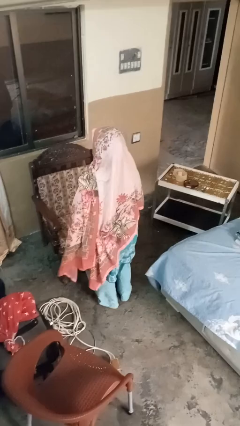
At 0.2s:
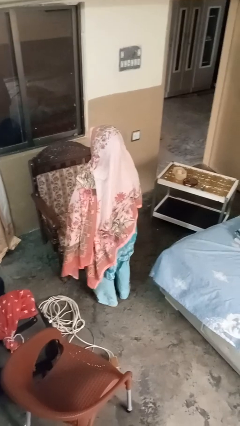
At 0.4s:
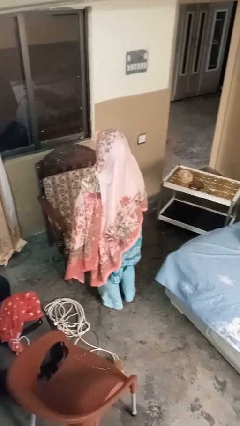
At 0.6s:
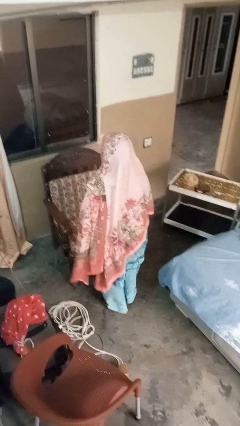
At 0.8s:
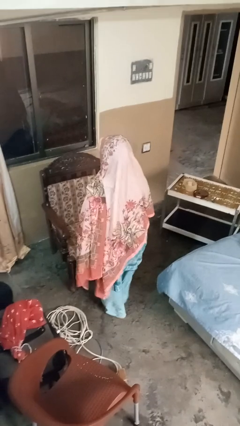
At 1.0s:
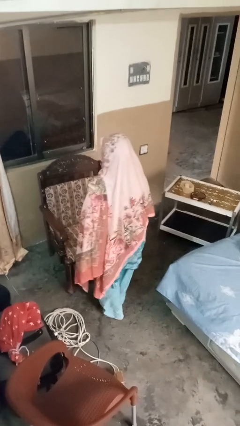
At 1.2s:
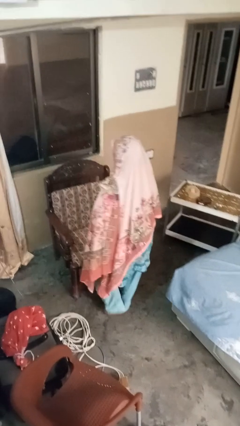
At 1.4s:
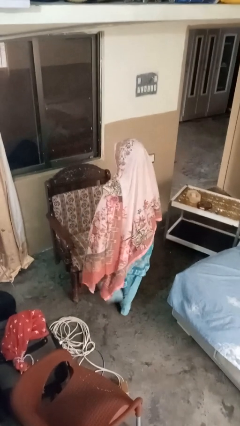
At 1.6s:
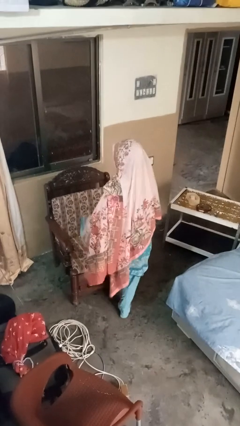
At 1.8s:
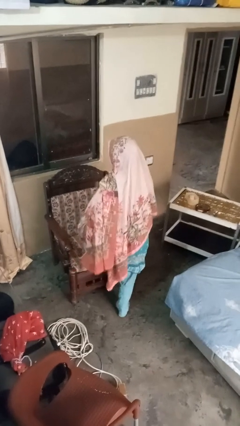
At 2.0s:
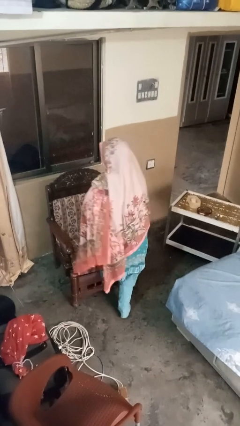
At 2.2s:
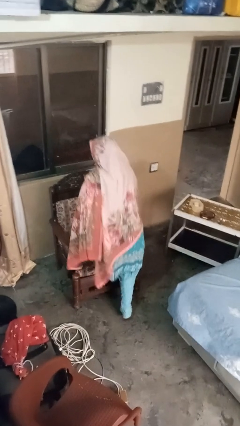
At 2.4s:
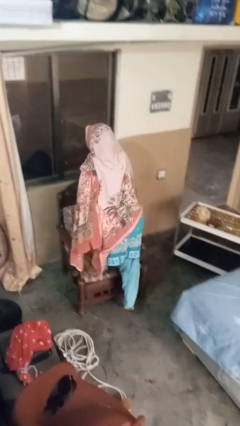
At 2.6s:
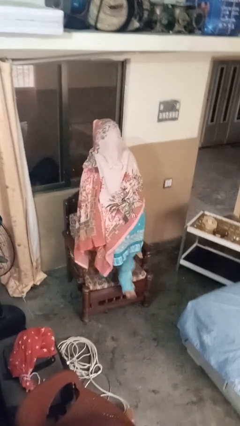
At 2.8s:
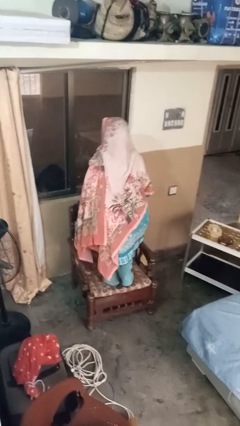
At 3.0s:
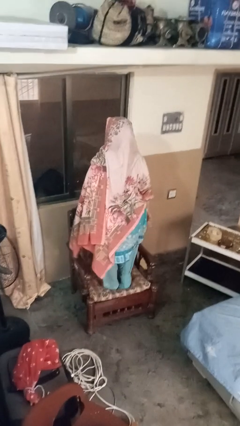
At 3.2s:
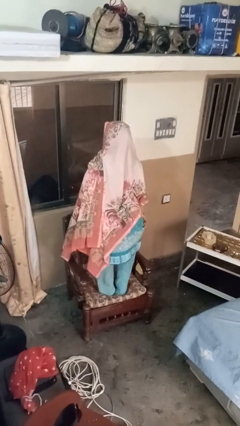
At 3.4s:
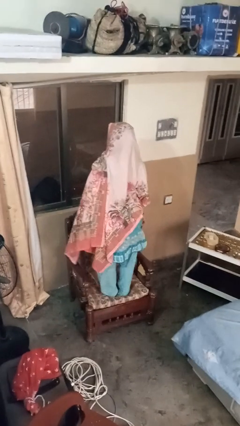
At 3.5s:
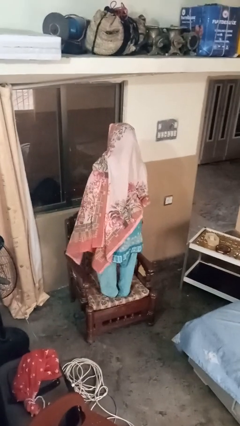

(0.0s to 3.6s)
person climbs on couch

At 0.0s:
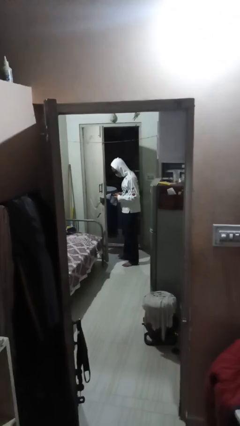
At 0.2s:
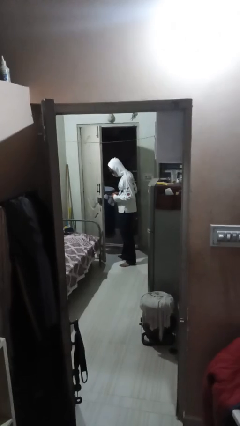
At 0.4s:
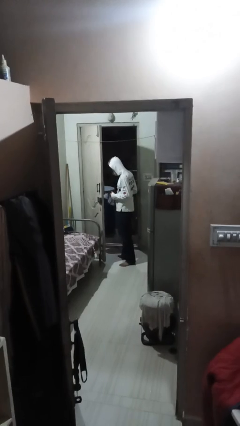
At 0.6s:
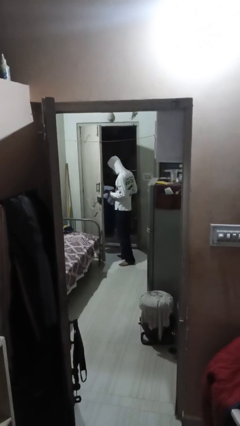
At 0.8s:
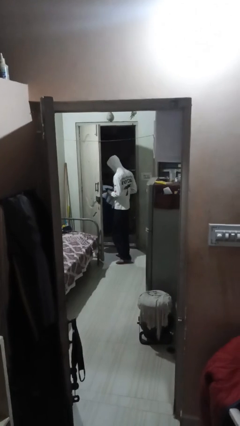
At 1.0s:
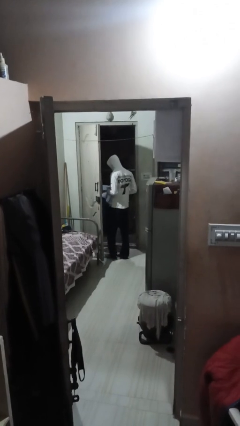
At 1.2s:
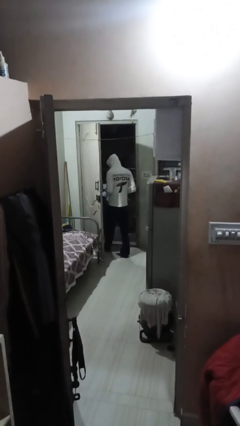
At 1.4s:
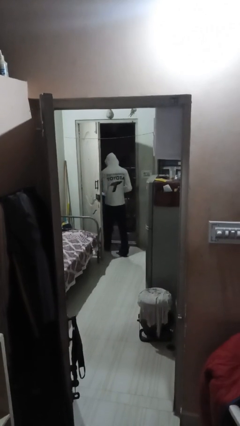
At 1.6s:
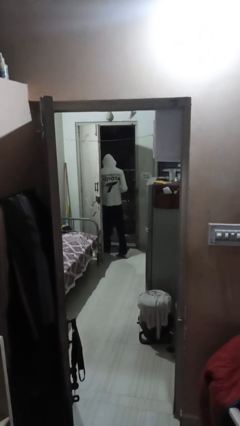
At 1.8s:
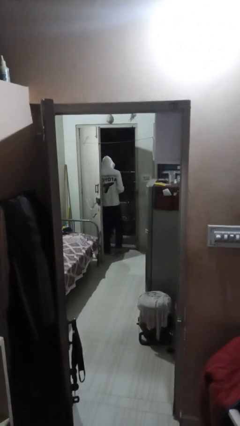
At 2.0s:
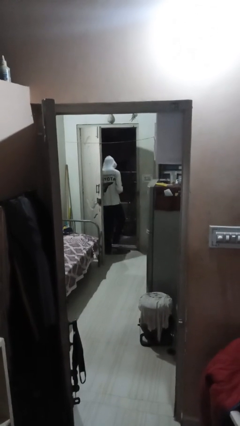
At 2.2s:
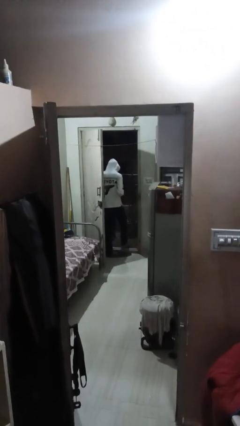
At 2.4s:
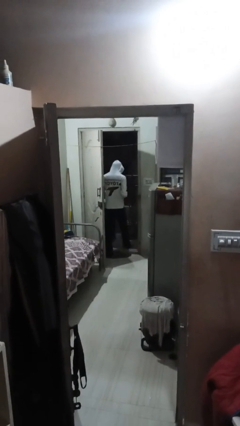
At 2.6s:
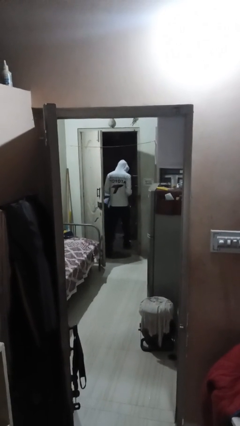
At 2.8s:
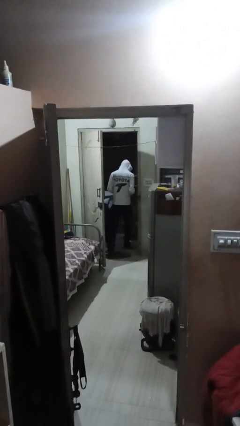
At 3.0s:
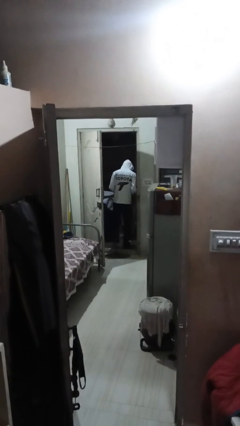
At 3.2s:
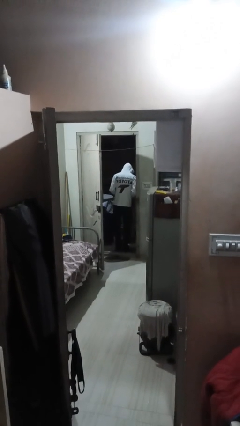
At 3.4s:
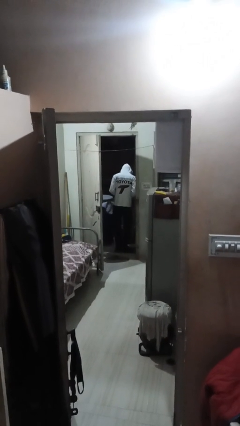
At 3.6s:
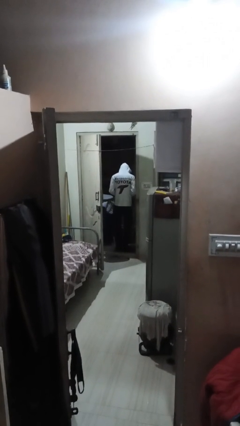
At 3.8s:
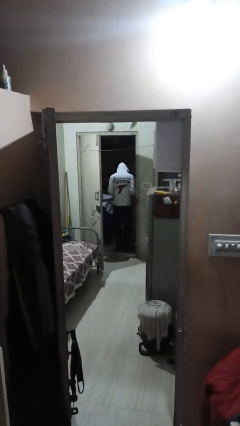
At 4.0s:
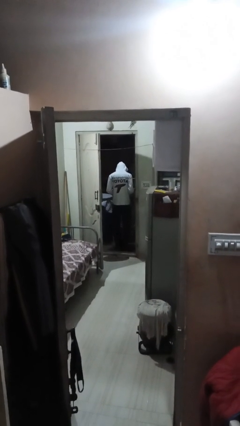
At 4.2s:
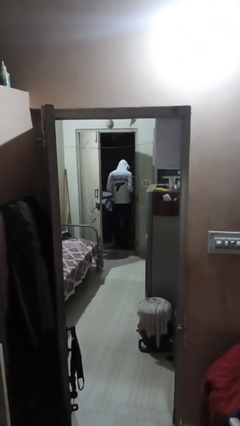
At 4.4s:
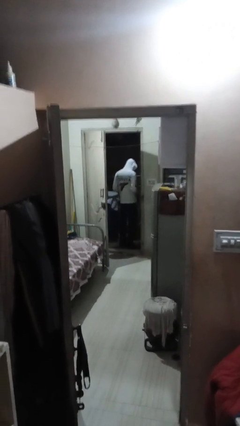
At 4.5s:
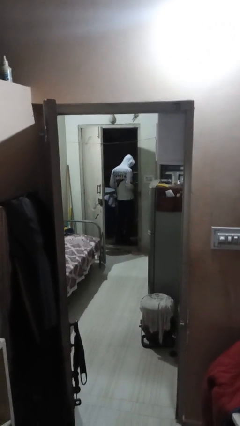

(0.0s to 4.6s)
person exits scene through structure

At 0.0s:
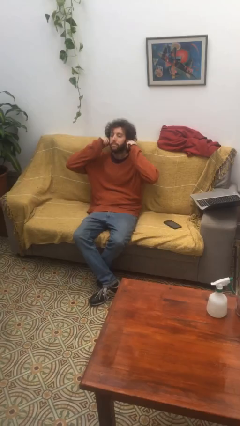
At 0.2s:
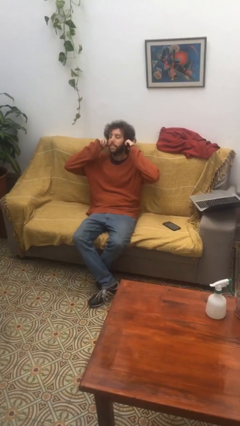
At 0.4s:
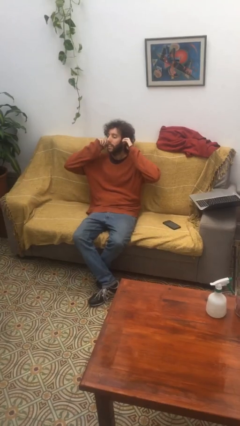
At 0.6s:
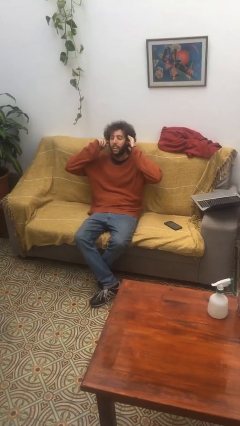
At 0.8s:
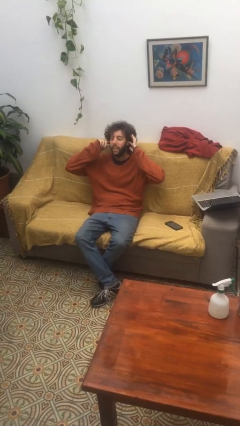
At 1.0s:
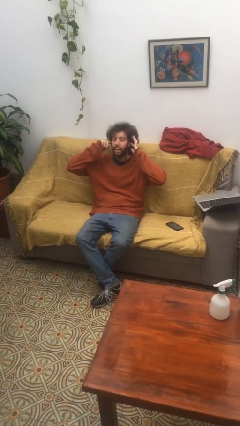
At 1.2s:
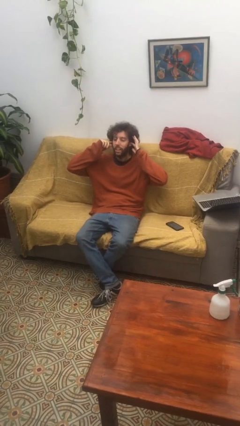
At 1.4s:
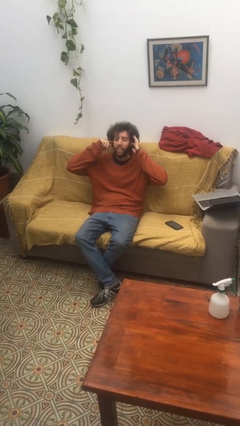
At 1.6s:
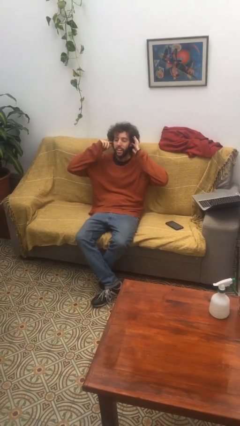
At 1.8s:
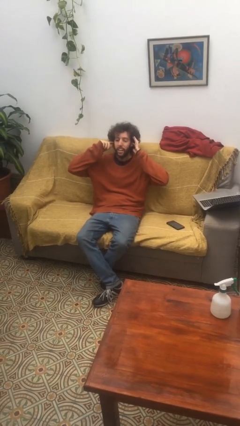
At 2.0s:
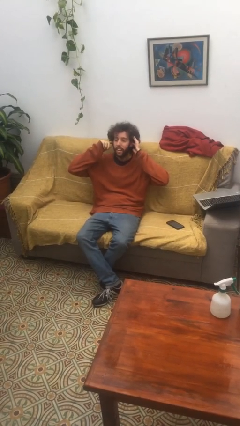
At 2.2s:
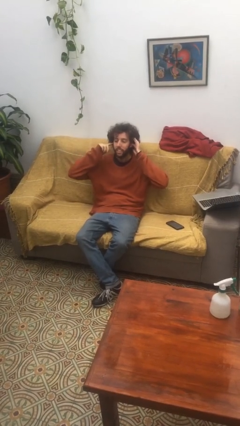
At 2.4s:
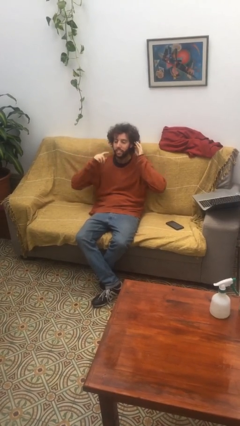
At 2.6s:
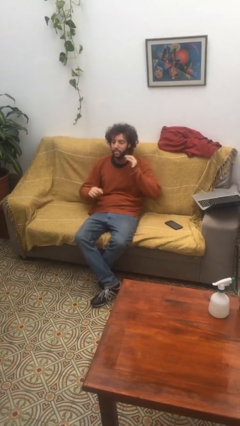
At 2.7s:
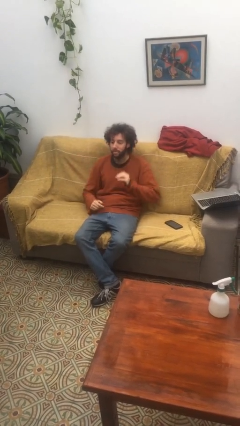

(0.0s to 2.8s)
person puts fingers in ear

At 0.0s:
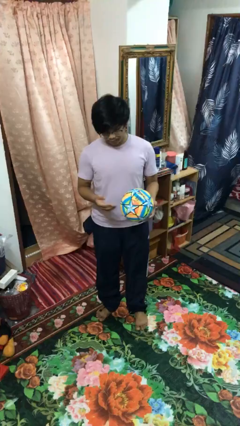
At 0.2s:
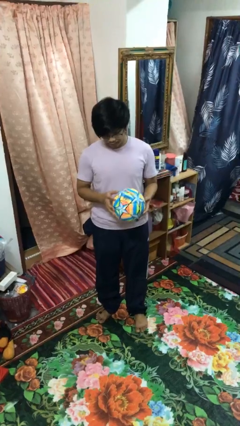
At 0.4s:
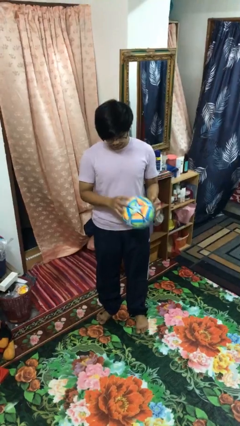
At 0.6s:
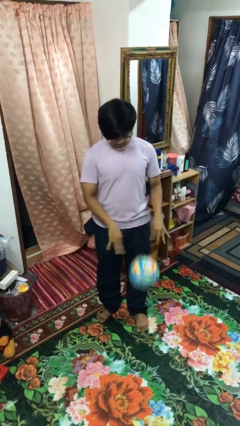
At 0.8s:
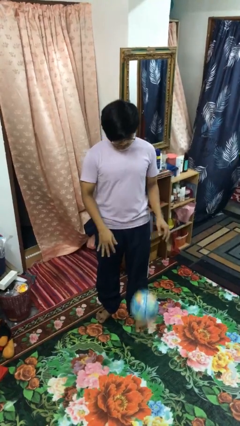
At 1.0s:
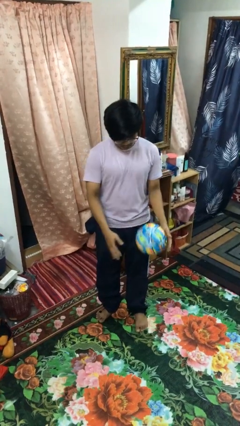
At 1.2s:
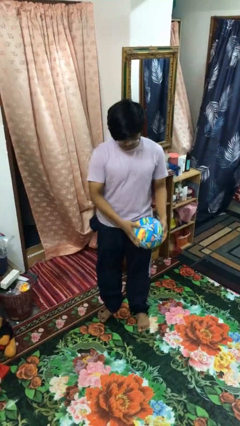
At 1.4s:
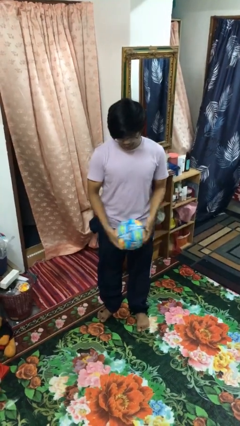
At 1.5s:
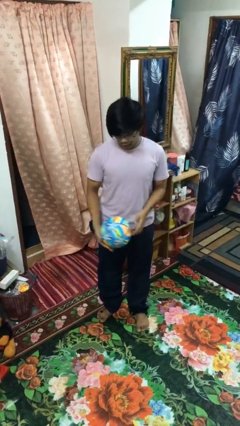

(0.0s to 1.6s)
person bounces ball on floor

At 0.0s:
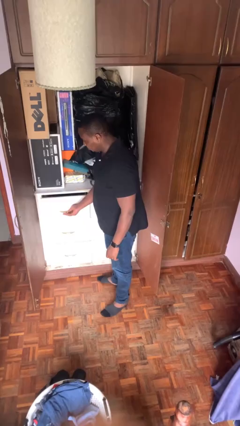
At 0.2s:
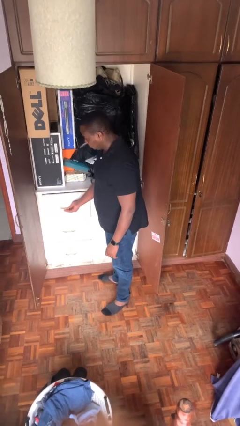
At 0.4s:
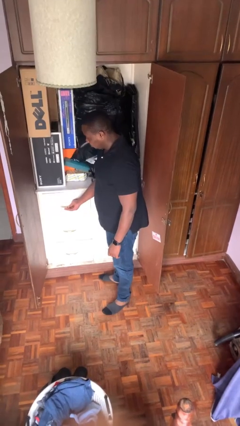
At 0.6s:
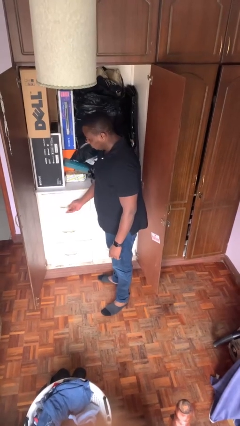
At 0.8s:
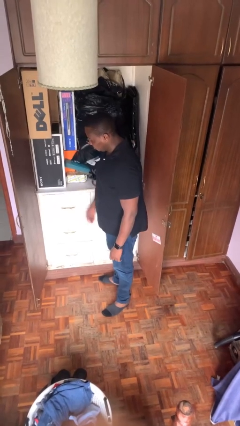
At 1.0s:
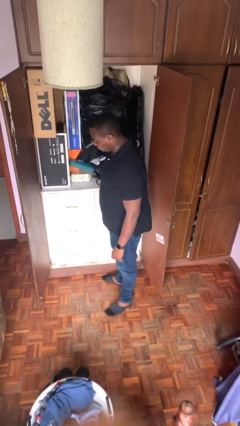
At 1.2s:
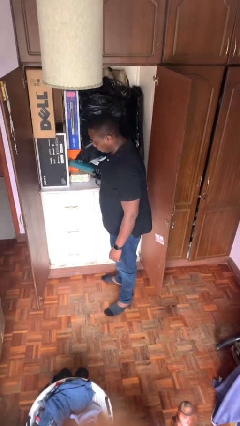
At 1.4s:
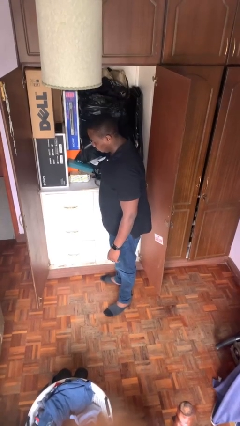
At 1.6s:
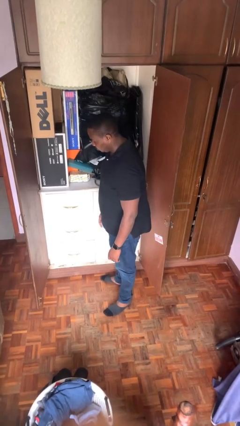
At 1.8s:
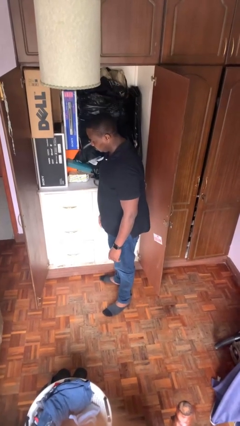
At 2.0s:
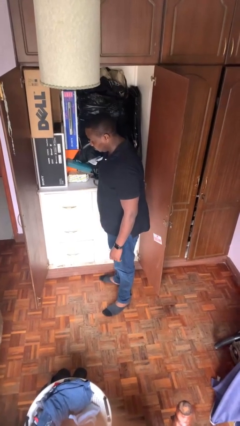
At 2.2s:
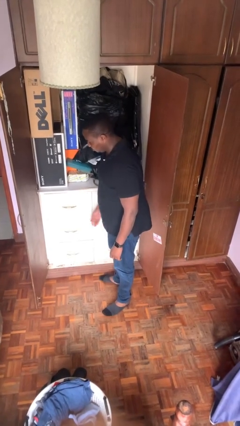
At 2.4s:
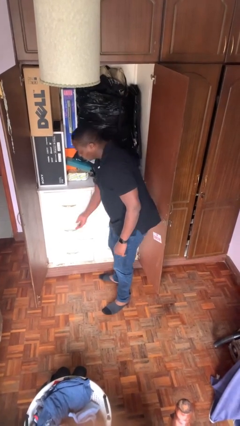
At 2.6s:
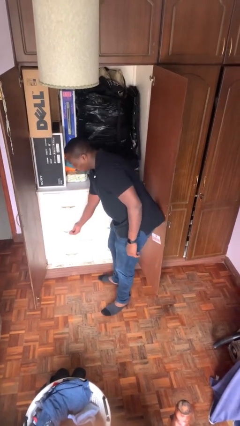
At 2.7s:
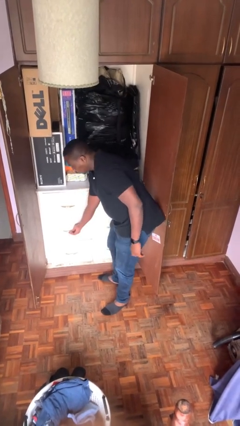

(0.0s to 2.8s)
person closes dresser drawer

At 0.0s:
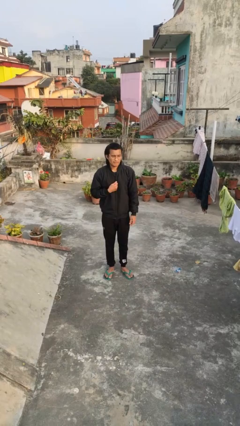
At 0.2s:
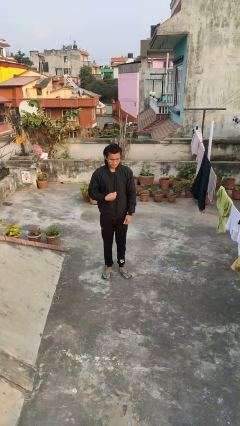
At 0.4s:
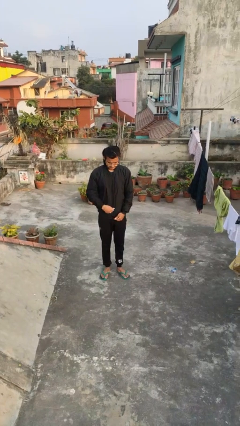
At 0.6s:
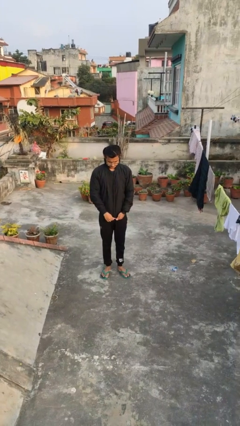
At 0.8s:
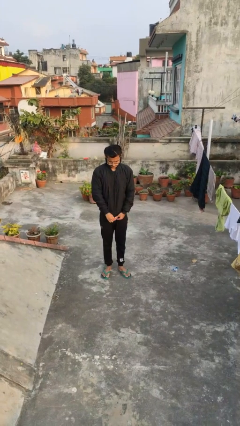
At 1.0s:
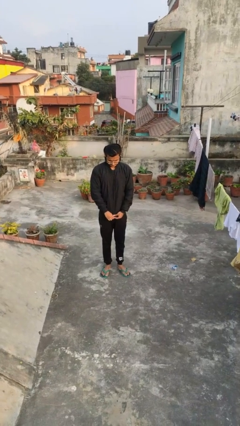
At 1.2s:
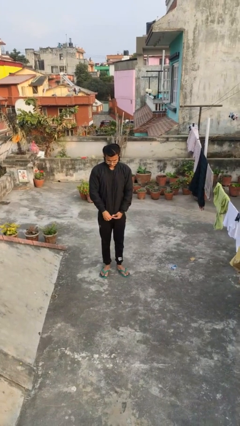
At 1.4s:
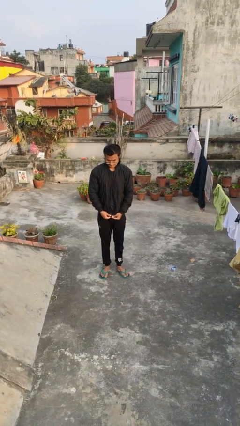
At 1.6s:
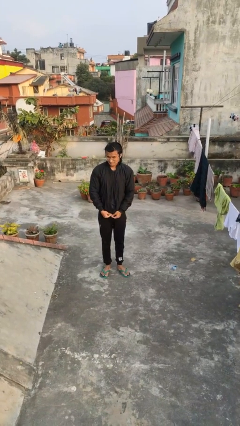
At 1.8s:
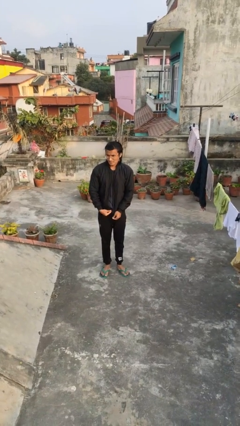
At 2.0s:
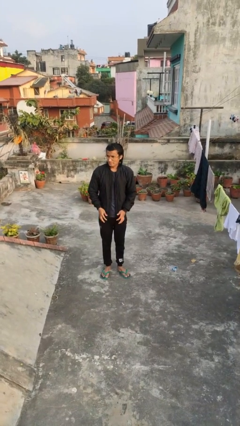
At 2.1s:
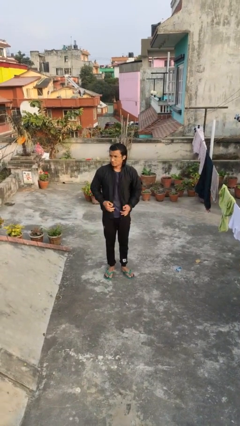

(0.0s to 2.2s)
person unzips jacket
